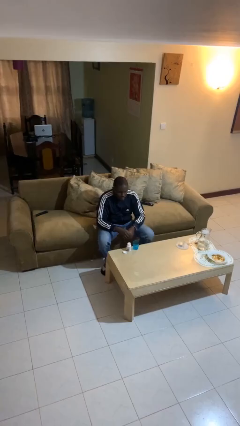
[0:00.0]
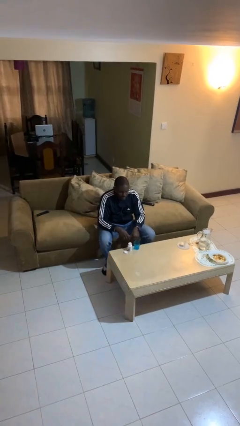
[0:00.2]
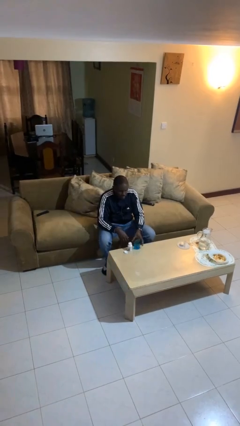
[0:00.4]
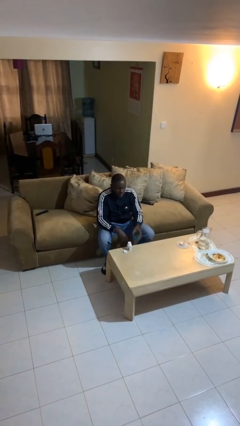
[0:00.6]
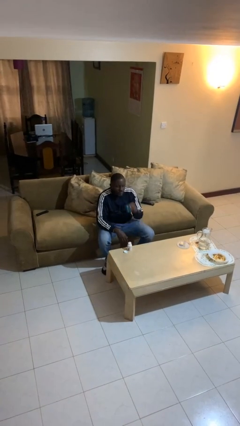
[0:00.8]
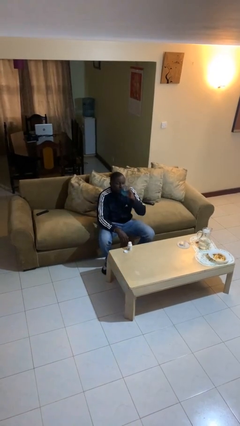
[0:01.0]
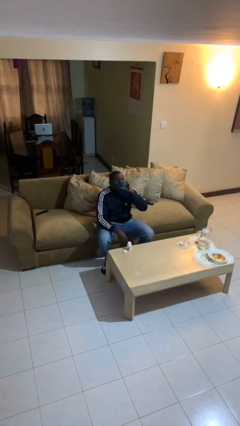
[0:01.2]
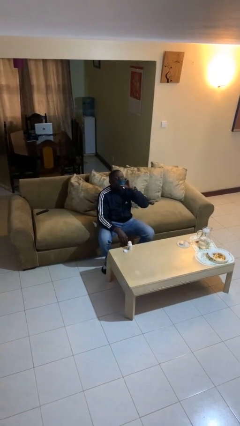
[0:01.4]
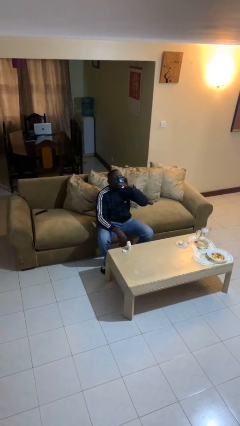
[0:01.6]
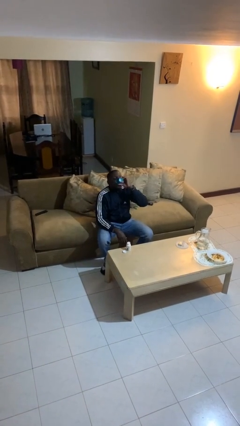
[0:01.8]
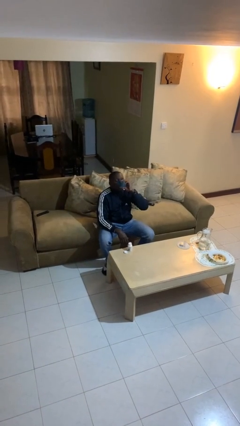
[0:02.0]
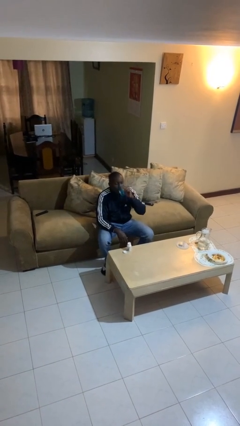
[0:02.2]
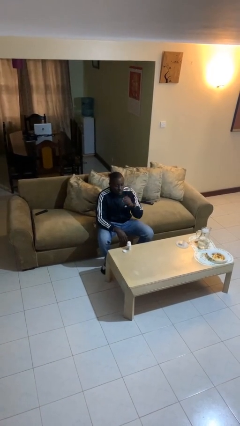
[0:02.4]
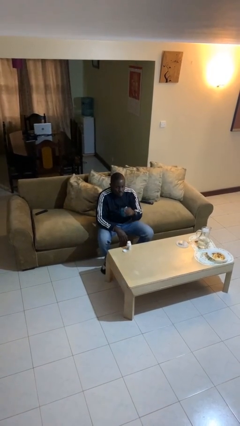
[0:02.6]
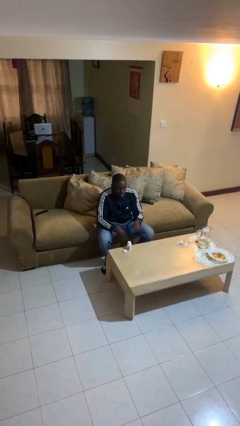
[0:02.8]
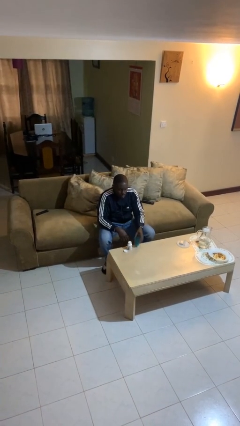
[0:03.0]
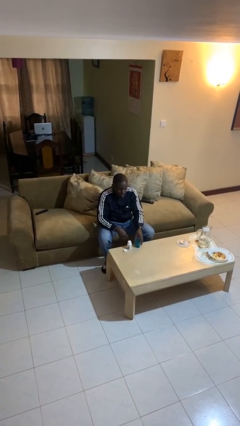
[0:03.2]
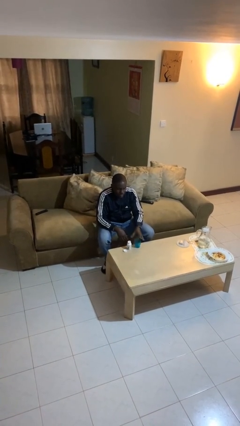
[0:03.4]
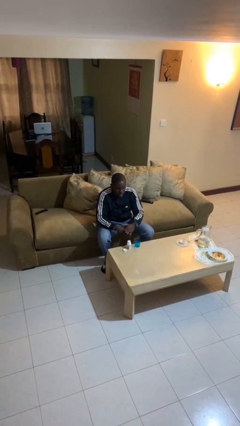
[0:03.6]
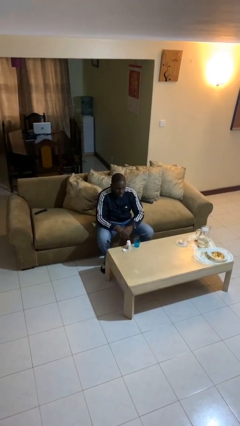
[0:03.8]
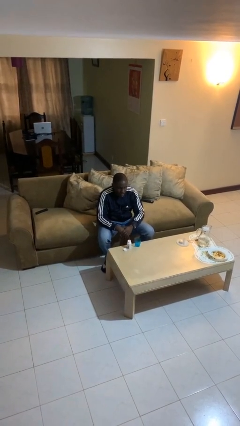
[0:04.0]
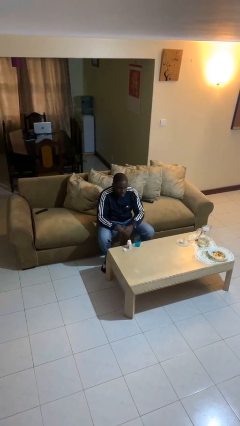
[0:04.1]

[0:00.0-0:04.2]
person drinks from cup

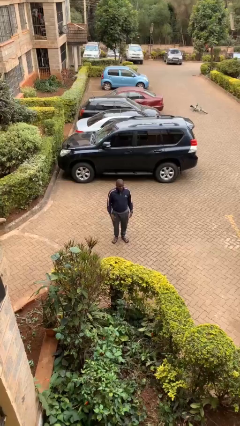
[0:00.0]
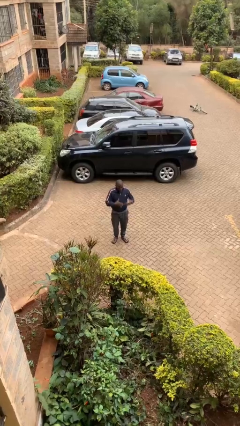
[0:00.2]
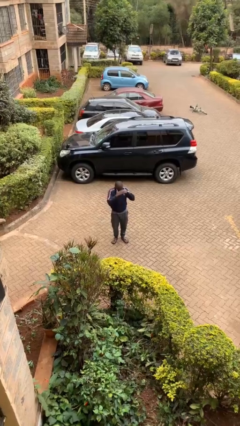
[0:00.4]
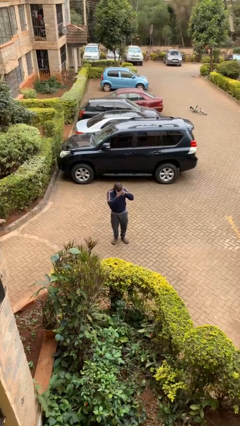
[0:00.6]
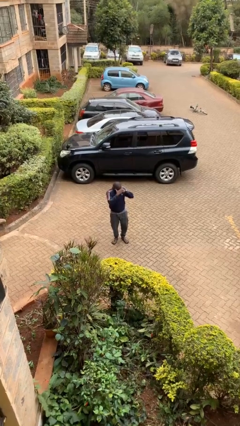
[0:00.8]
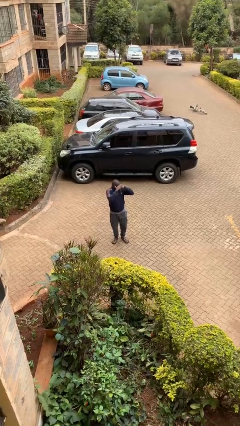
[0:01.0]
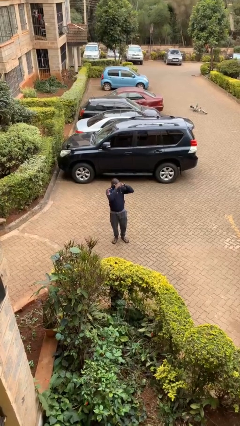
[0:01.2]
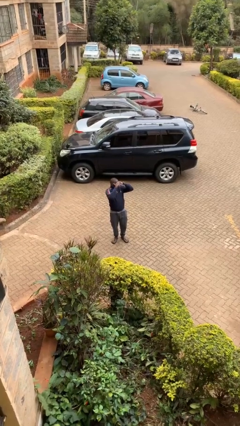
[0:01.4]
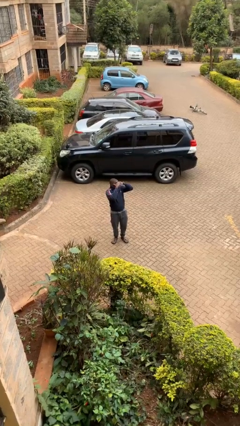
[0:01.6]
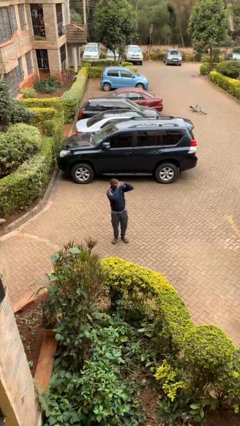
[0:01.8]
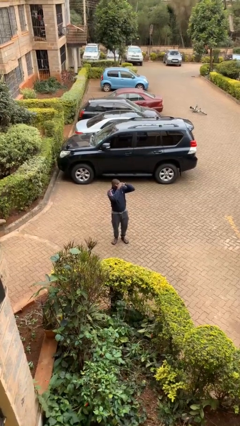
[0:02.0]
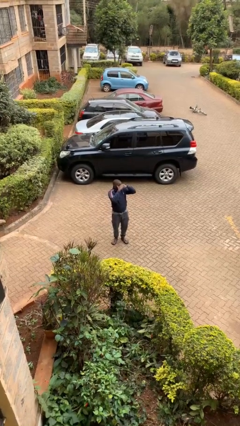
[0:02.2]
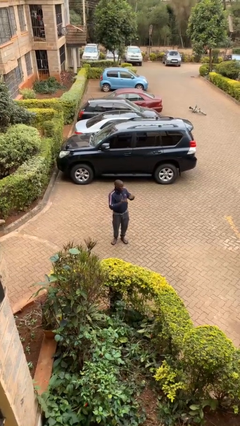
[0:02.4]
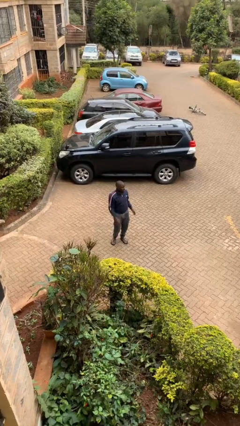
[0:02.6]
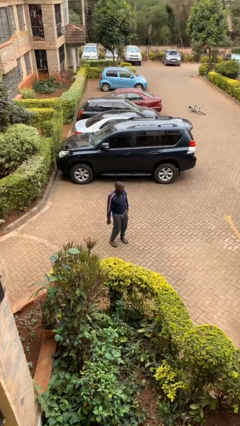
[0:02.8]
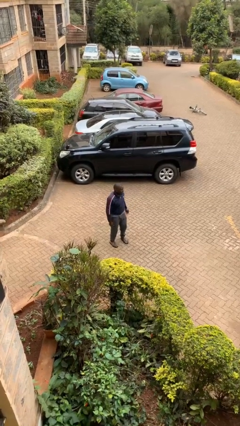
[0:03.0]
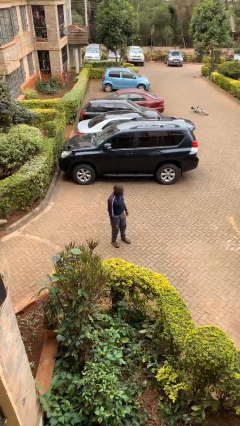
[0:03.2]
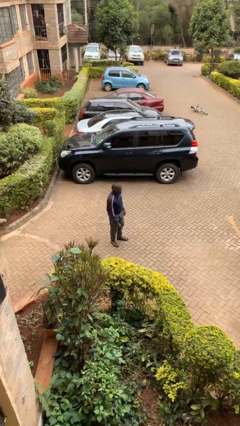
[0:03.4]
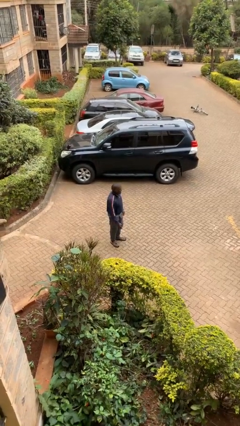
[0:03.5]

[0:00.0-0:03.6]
person shades eyes

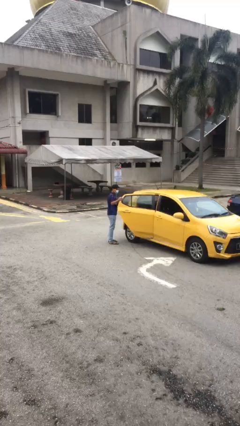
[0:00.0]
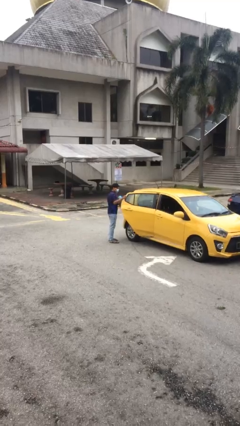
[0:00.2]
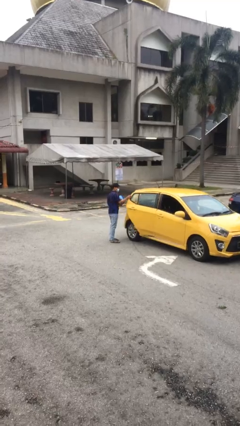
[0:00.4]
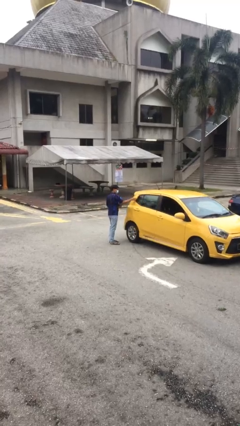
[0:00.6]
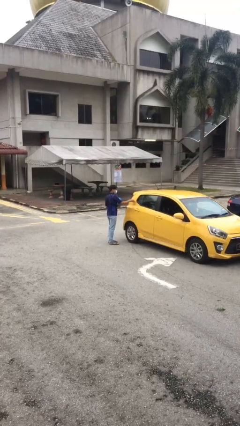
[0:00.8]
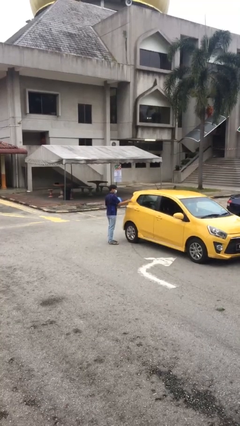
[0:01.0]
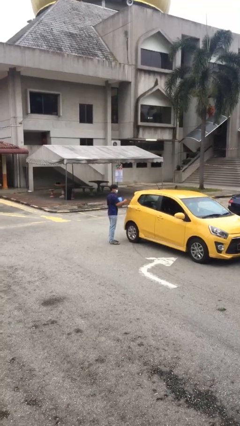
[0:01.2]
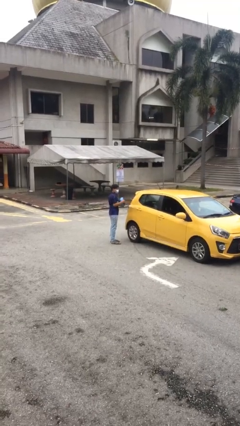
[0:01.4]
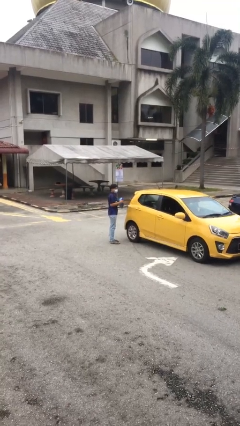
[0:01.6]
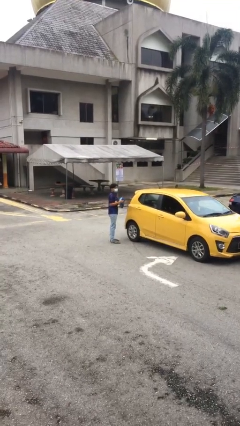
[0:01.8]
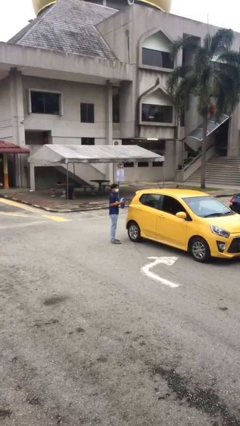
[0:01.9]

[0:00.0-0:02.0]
person closes car door

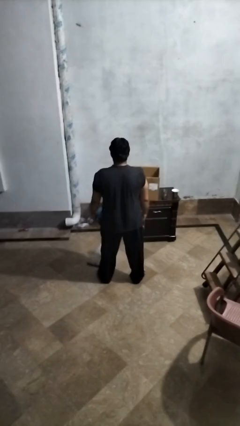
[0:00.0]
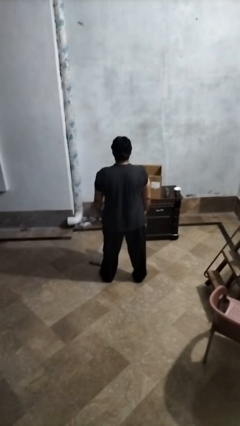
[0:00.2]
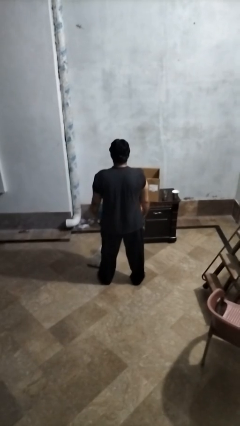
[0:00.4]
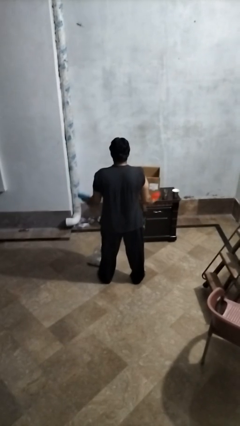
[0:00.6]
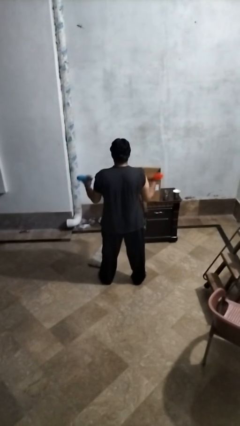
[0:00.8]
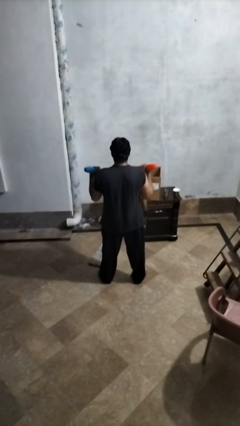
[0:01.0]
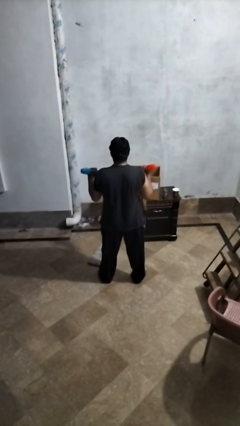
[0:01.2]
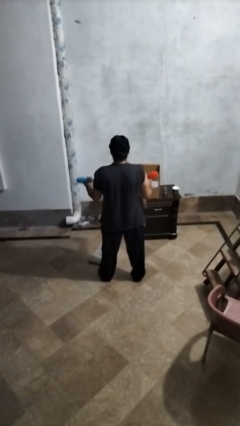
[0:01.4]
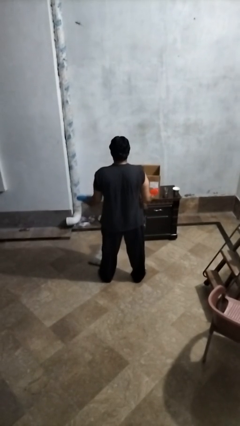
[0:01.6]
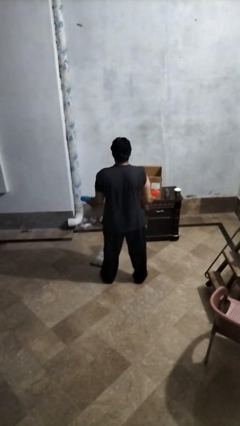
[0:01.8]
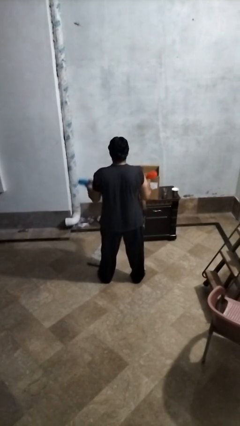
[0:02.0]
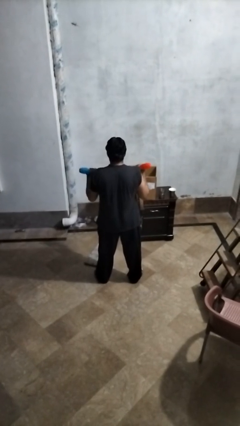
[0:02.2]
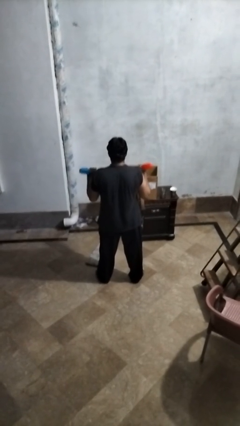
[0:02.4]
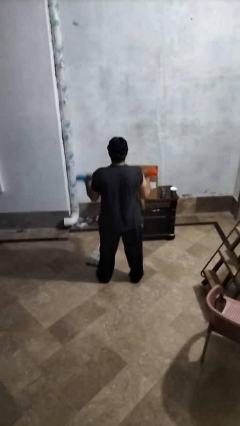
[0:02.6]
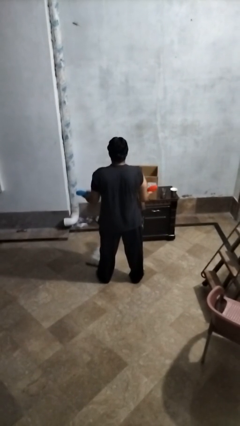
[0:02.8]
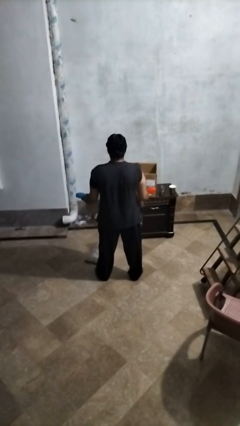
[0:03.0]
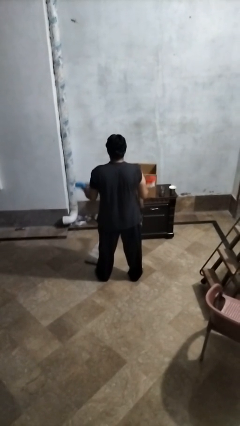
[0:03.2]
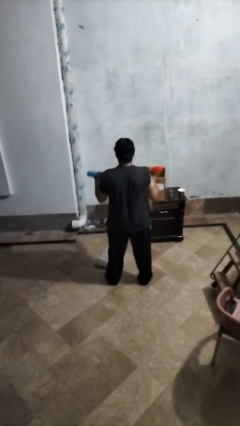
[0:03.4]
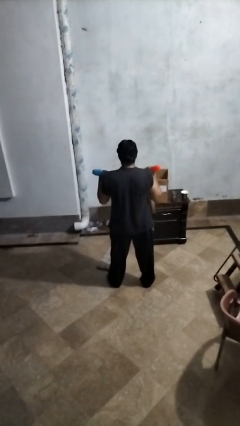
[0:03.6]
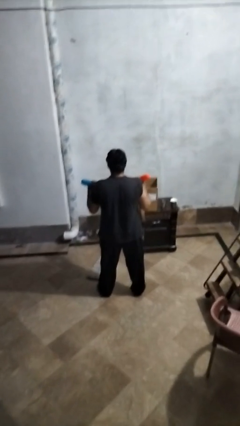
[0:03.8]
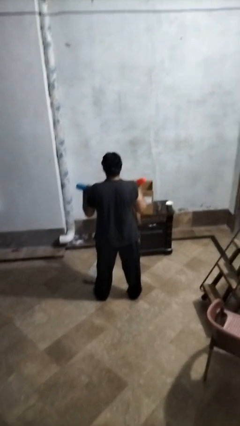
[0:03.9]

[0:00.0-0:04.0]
person lifts dumbbells

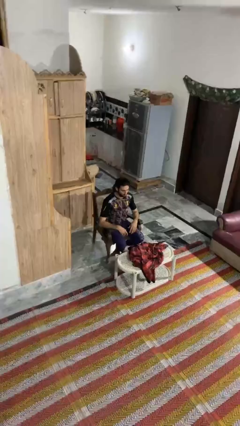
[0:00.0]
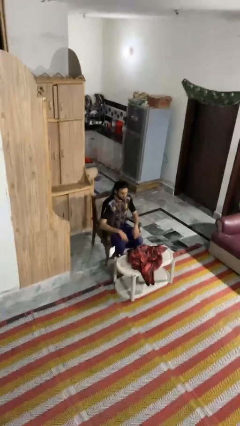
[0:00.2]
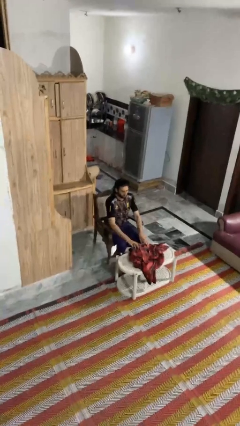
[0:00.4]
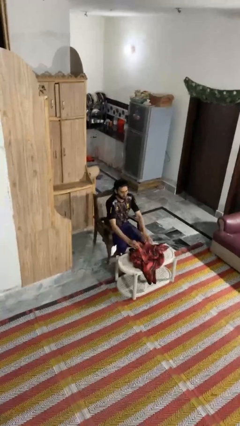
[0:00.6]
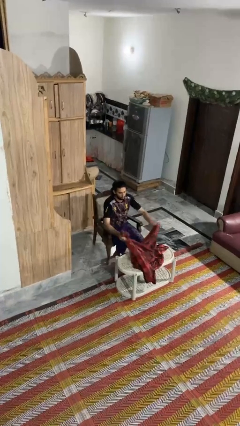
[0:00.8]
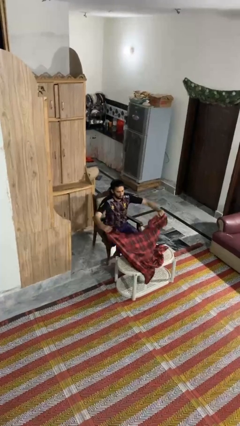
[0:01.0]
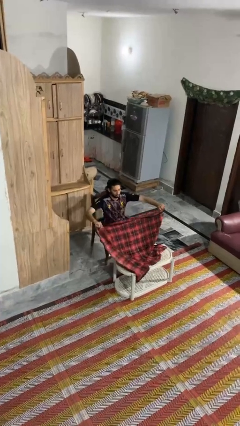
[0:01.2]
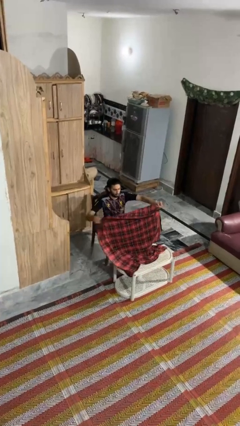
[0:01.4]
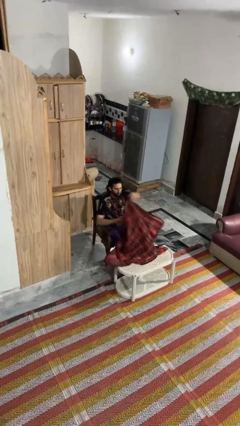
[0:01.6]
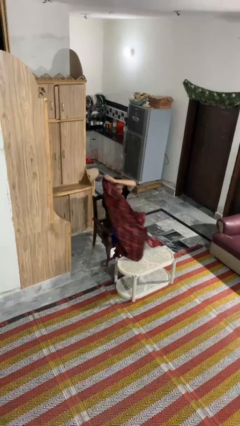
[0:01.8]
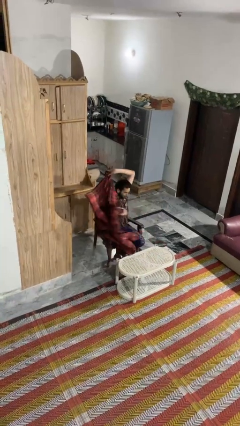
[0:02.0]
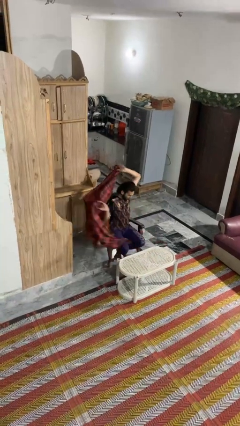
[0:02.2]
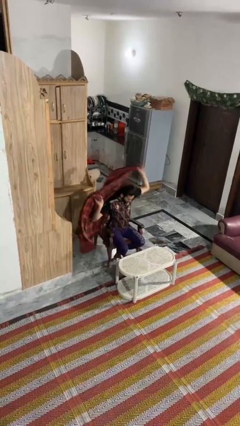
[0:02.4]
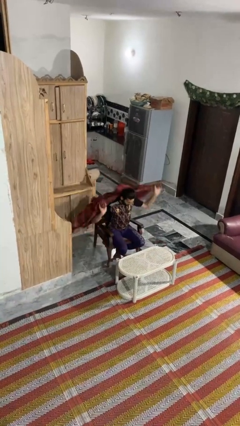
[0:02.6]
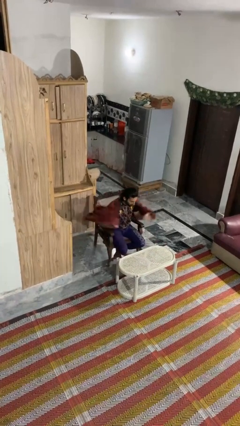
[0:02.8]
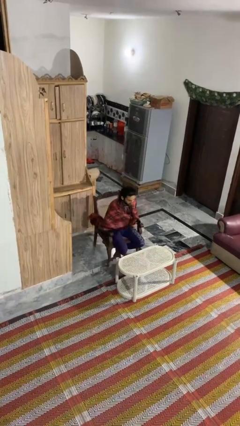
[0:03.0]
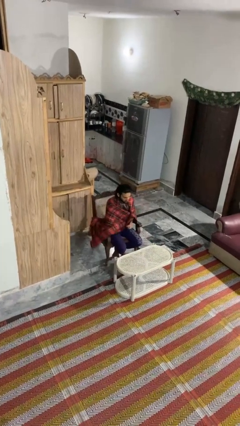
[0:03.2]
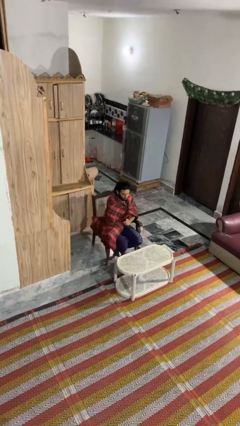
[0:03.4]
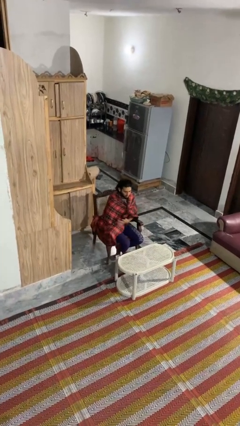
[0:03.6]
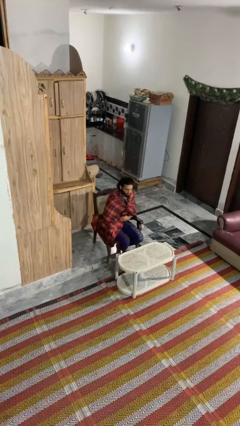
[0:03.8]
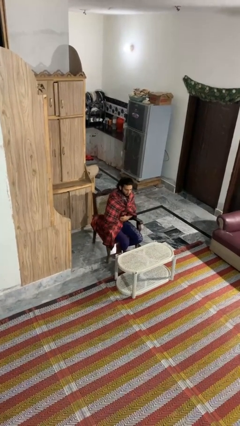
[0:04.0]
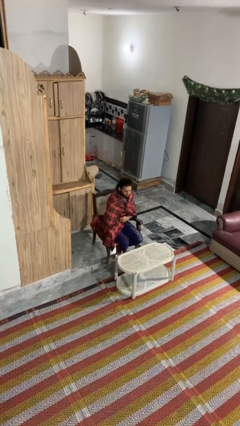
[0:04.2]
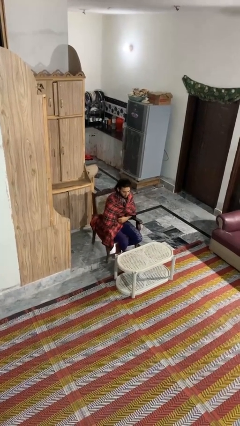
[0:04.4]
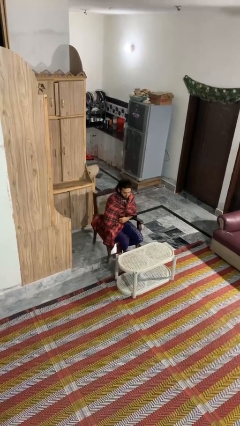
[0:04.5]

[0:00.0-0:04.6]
person covers with blanket
